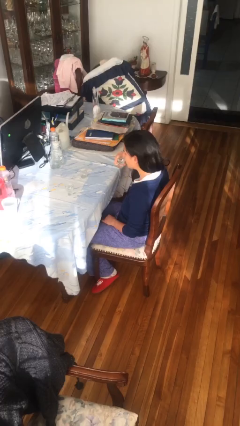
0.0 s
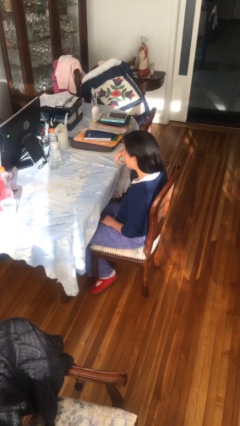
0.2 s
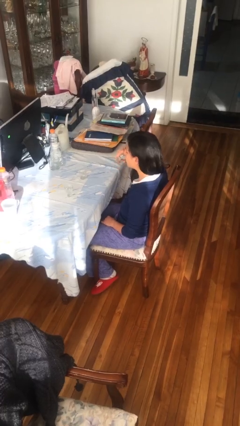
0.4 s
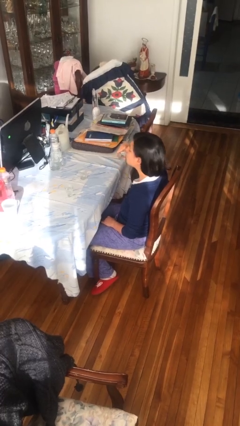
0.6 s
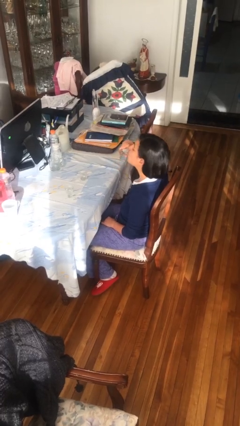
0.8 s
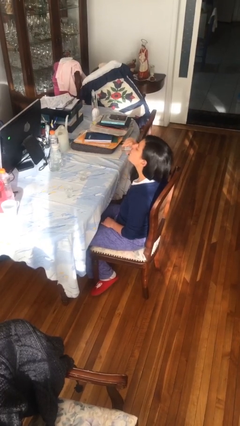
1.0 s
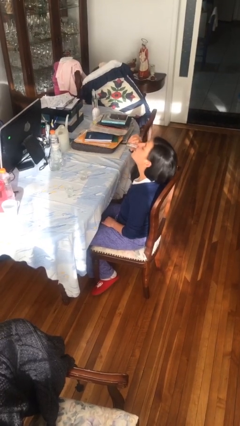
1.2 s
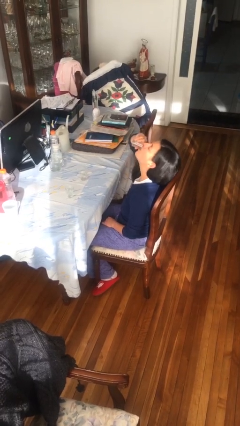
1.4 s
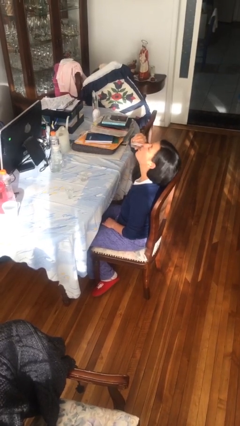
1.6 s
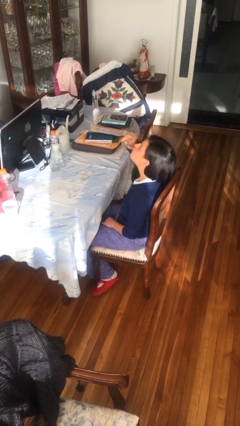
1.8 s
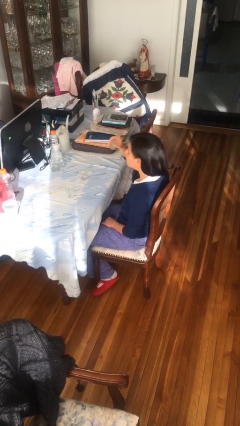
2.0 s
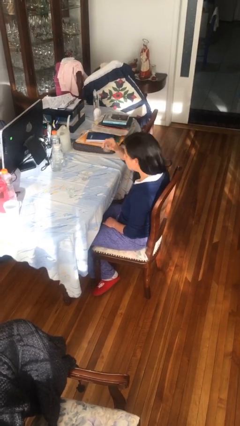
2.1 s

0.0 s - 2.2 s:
person drinks from shotglass

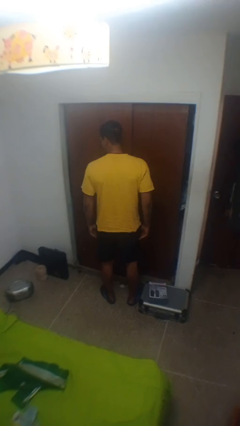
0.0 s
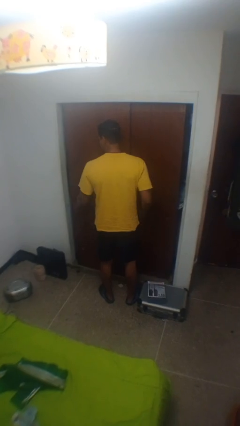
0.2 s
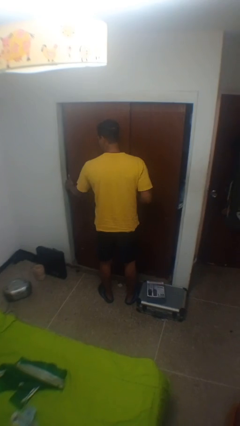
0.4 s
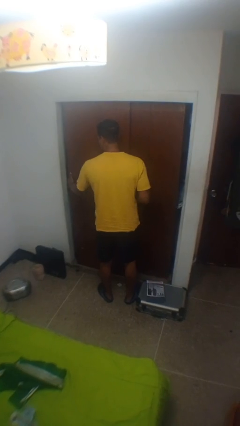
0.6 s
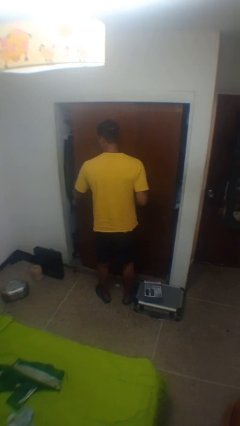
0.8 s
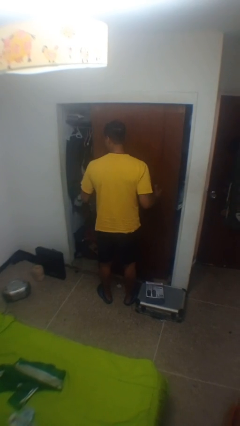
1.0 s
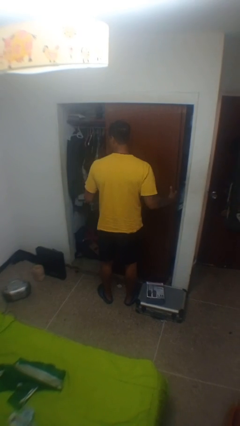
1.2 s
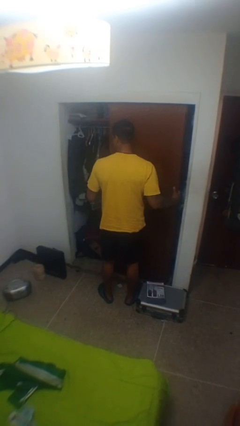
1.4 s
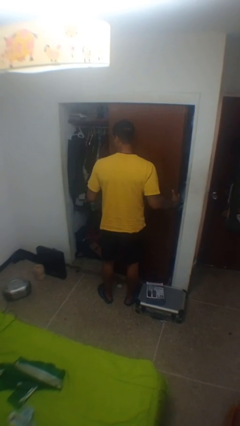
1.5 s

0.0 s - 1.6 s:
person opens closet door

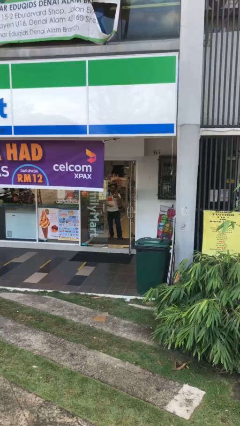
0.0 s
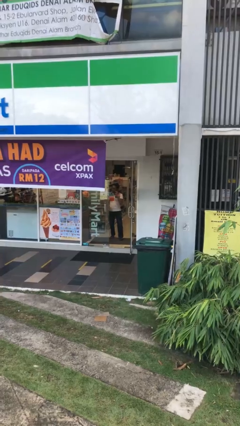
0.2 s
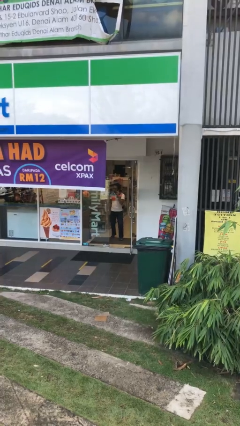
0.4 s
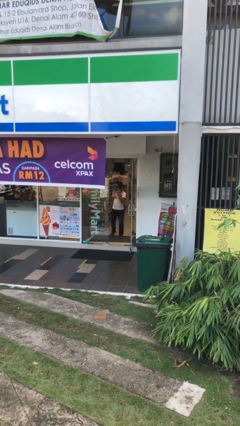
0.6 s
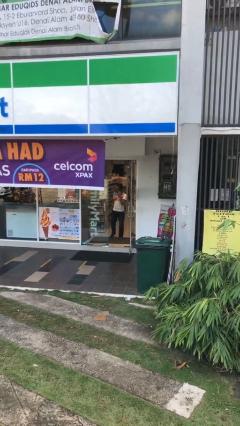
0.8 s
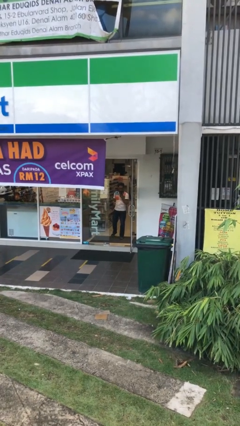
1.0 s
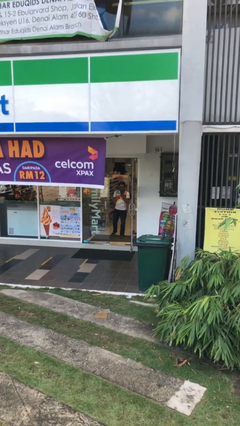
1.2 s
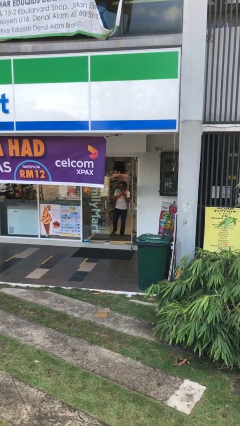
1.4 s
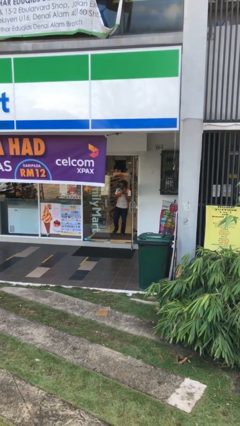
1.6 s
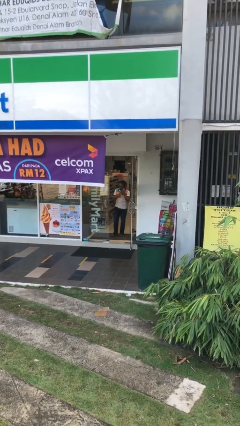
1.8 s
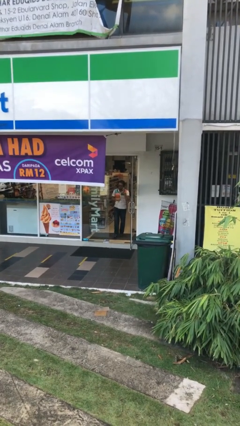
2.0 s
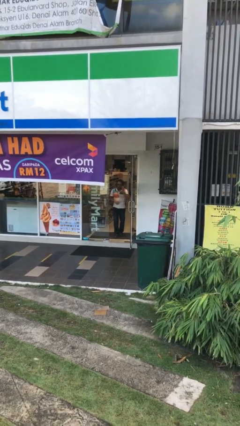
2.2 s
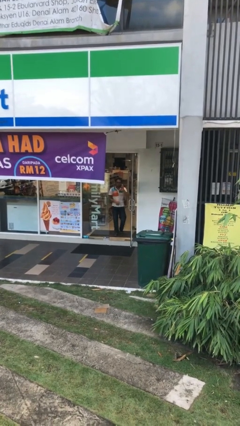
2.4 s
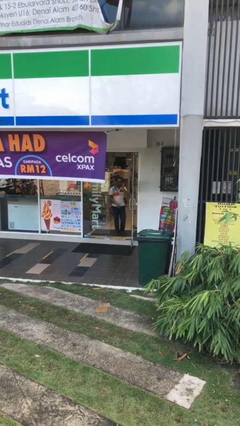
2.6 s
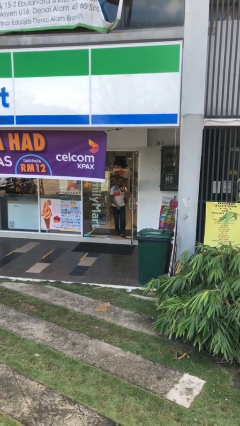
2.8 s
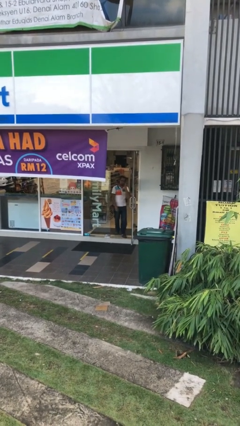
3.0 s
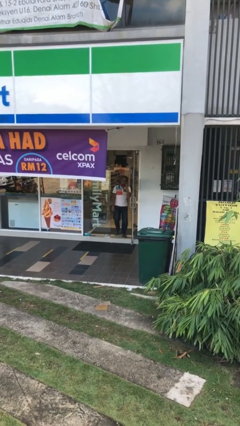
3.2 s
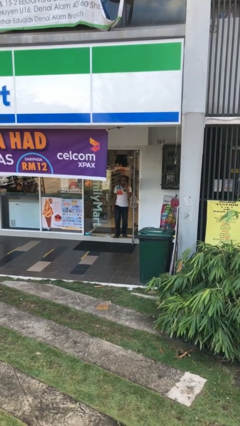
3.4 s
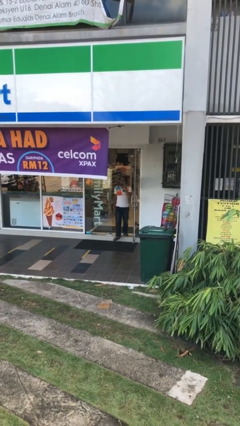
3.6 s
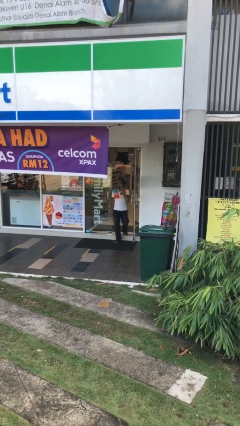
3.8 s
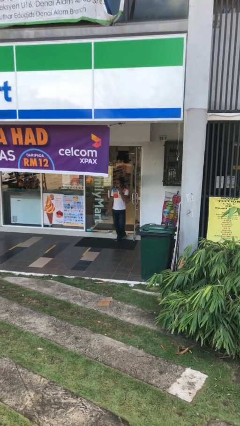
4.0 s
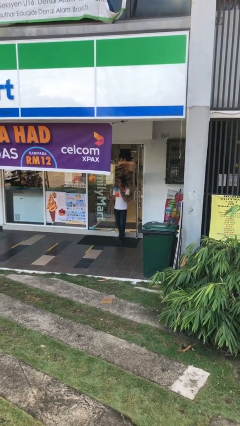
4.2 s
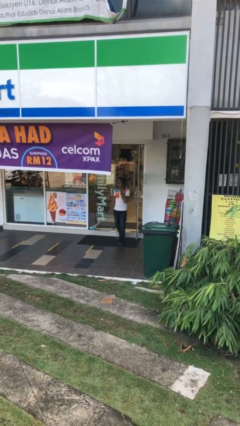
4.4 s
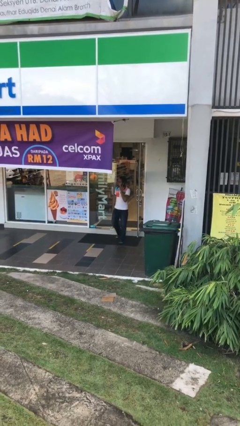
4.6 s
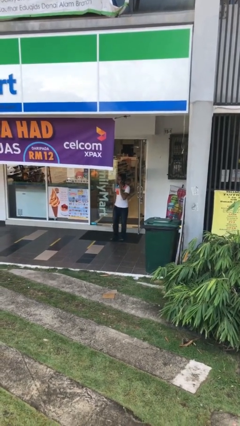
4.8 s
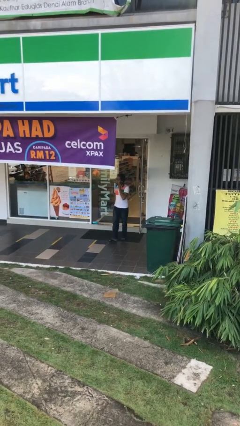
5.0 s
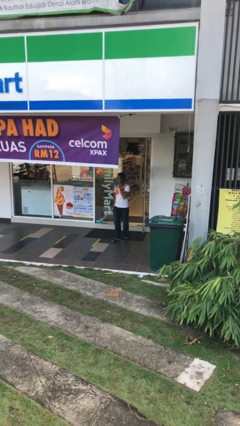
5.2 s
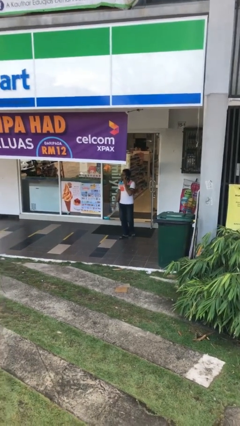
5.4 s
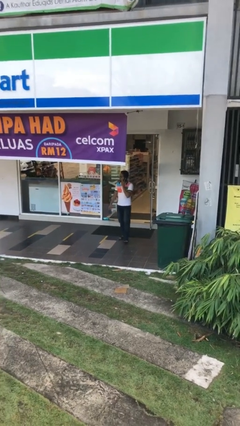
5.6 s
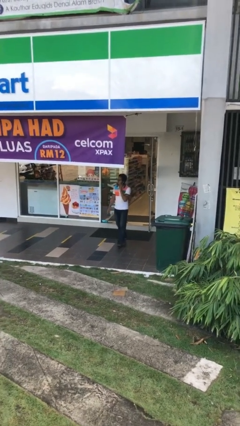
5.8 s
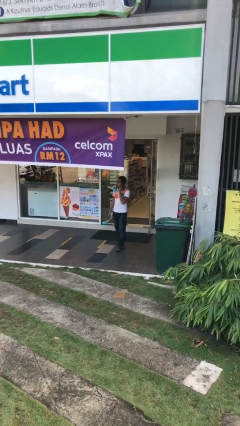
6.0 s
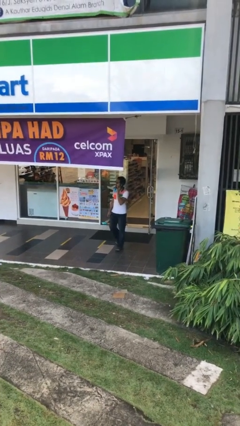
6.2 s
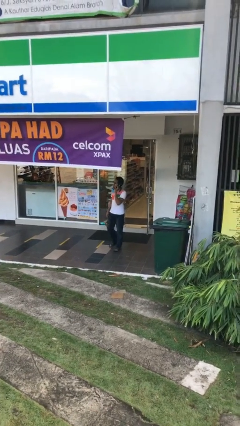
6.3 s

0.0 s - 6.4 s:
person enters scene through structure

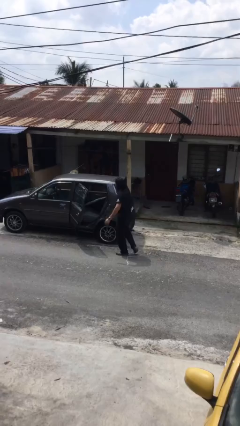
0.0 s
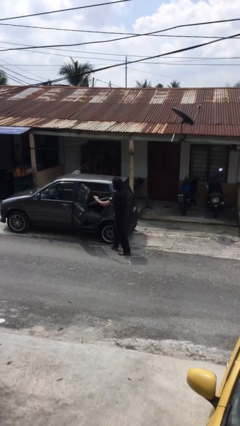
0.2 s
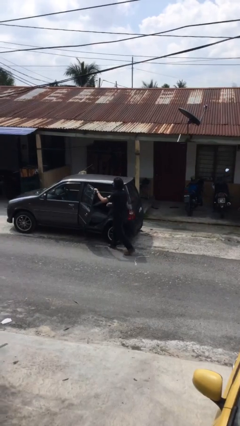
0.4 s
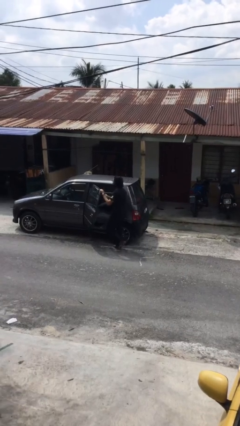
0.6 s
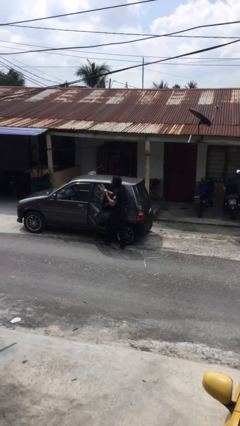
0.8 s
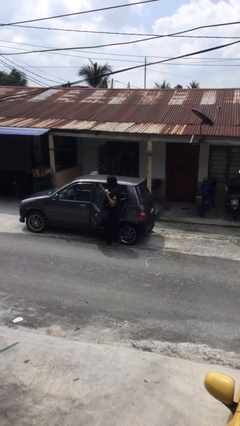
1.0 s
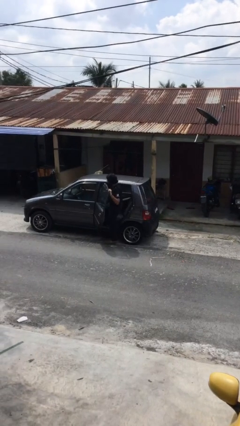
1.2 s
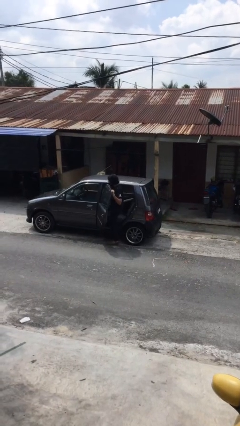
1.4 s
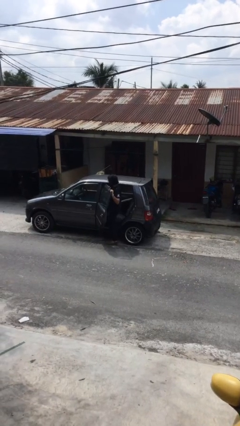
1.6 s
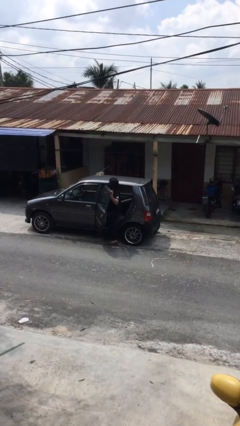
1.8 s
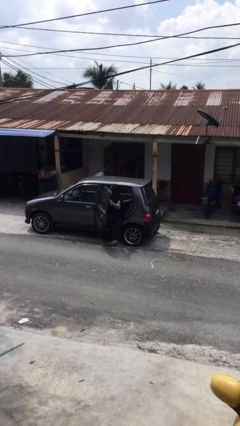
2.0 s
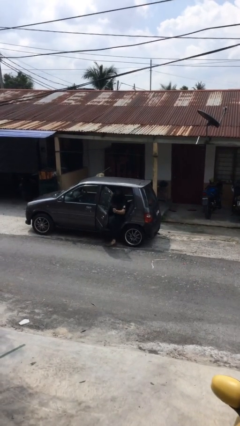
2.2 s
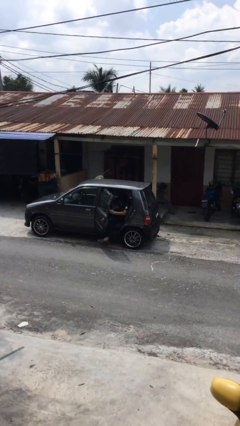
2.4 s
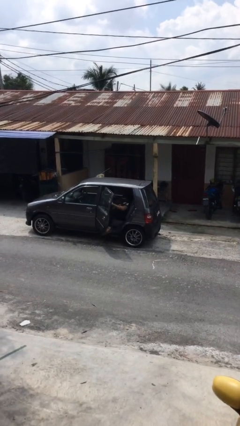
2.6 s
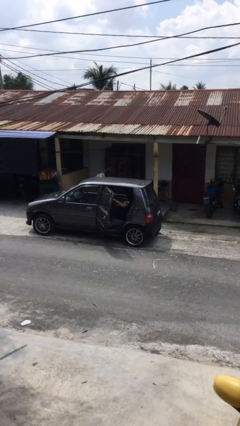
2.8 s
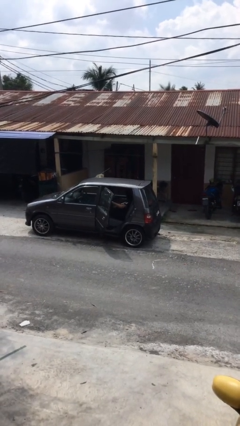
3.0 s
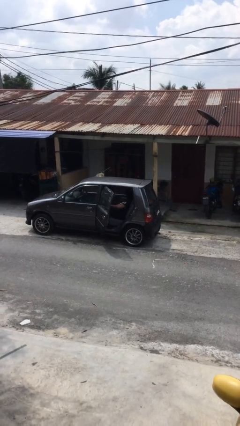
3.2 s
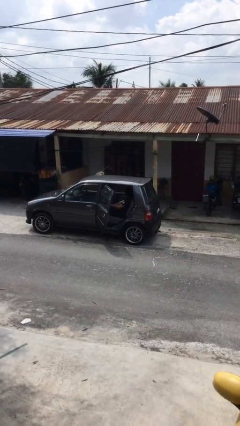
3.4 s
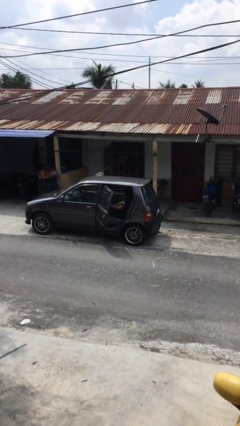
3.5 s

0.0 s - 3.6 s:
person enters car

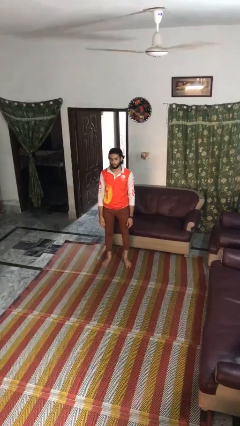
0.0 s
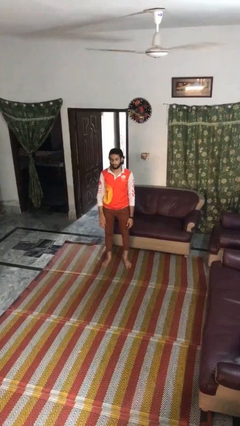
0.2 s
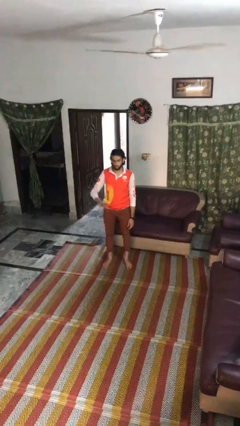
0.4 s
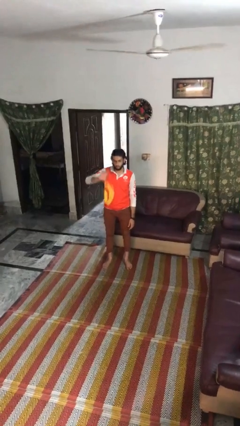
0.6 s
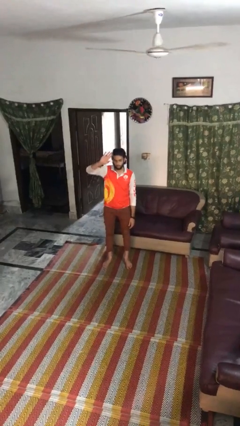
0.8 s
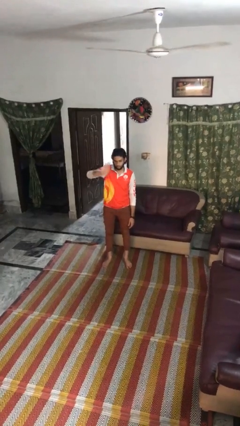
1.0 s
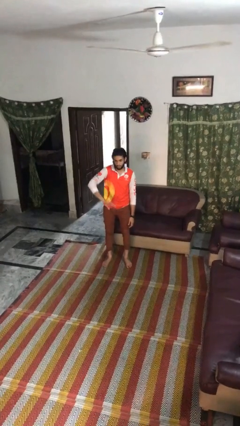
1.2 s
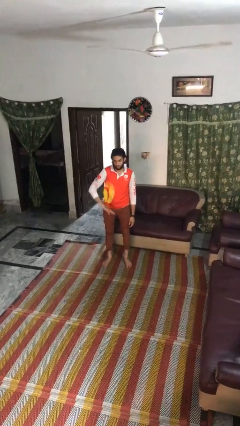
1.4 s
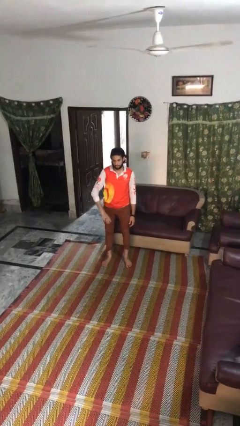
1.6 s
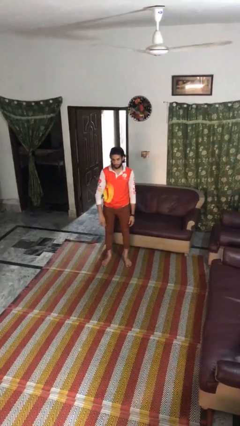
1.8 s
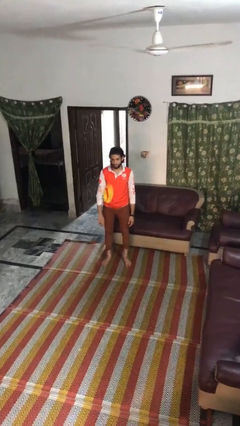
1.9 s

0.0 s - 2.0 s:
person gestures swipe down

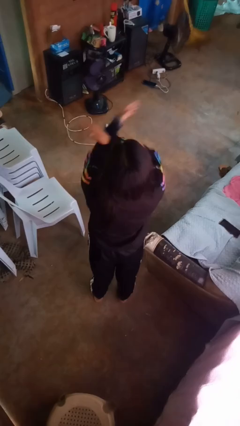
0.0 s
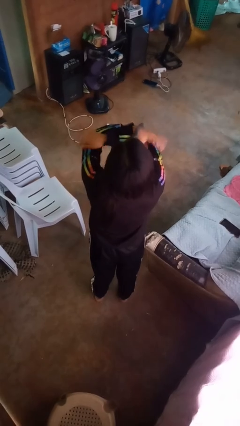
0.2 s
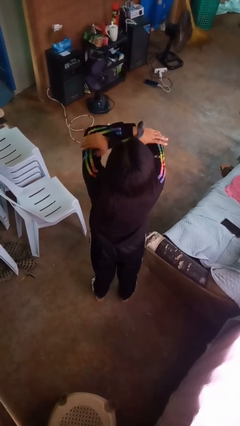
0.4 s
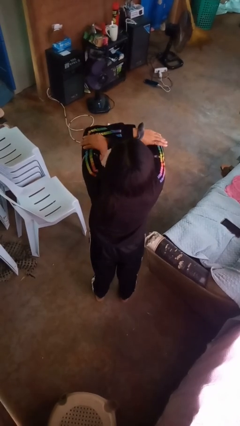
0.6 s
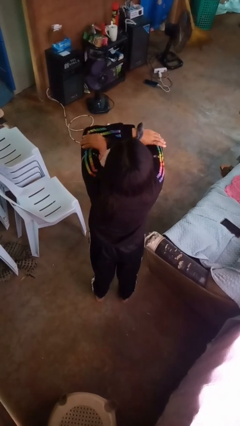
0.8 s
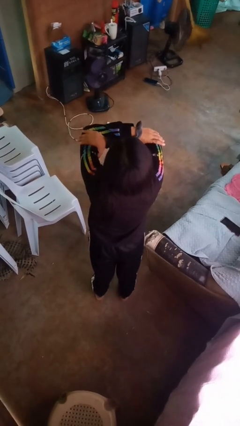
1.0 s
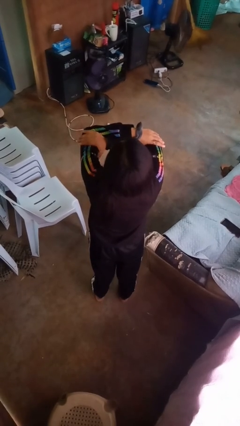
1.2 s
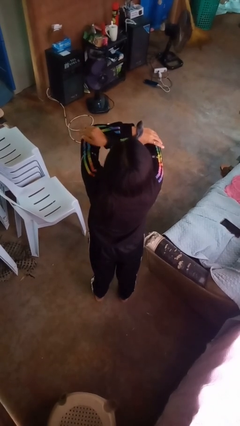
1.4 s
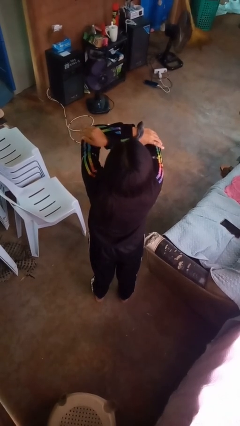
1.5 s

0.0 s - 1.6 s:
person gestures arms x

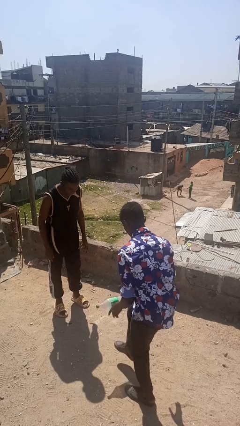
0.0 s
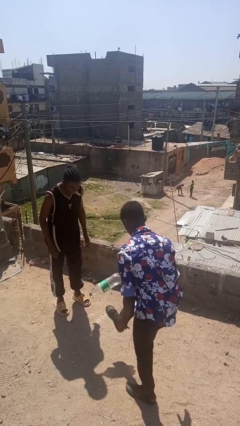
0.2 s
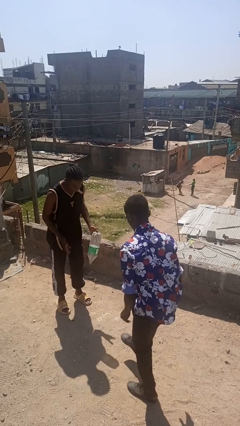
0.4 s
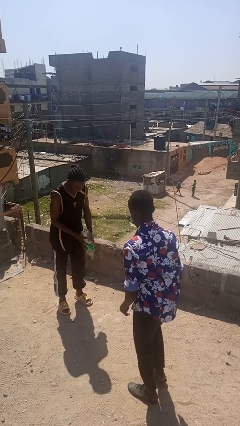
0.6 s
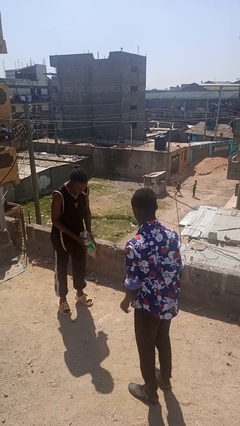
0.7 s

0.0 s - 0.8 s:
person kicks object to person
